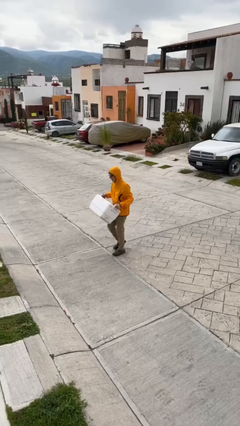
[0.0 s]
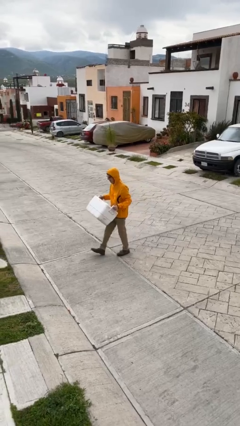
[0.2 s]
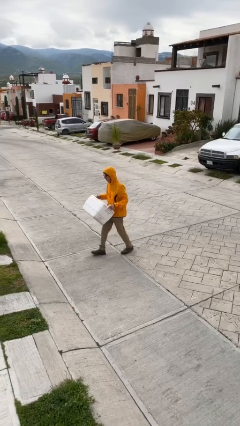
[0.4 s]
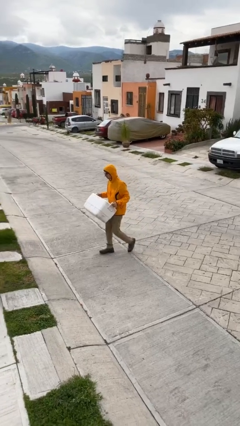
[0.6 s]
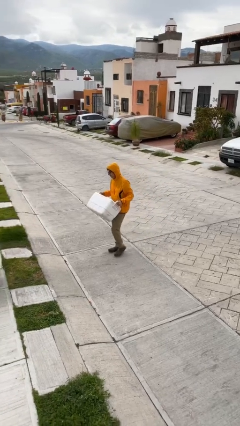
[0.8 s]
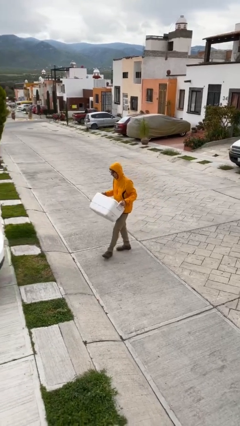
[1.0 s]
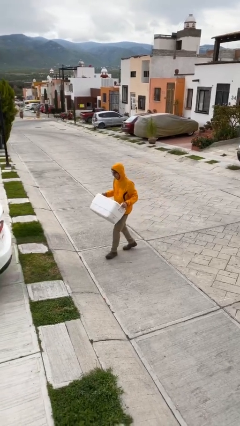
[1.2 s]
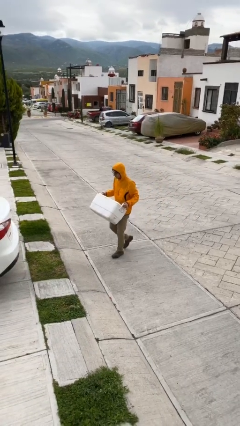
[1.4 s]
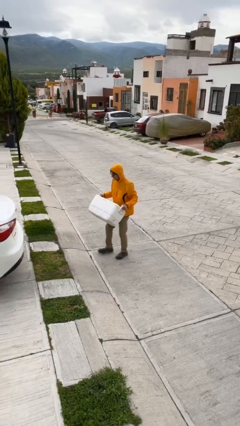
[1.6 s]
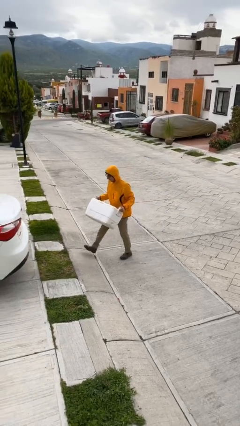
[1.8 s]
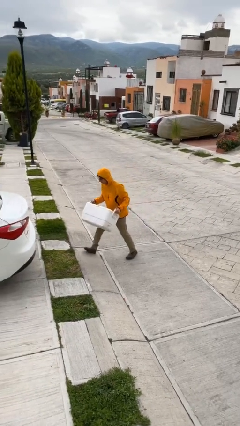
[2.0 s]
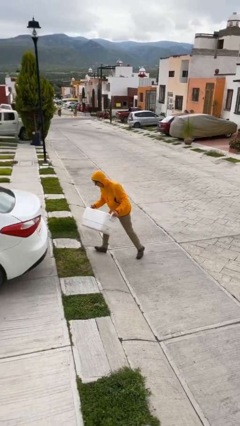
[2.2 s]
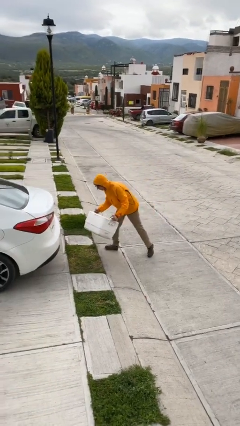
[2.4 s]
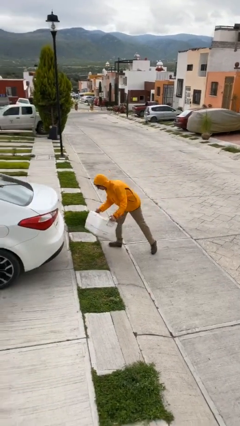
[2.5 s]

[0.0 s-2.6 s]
person carries heavy object

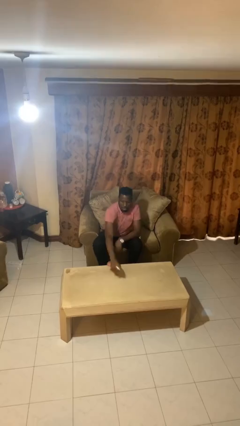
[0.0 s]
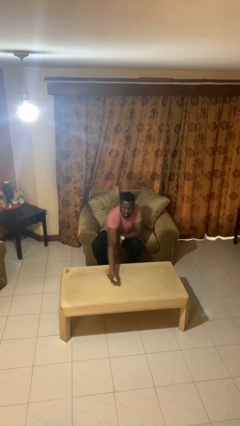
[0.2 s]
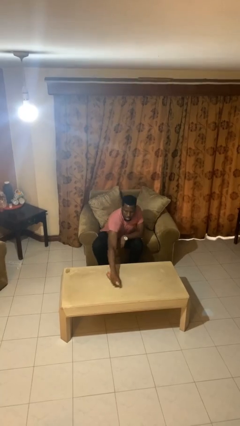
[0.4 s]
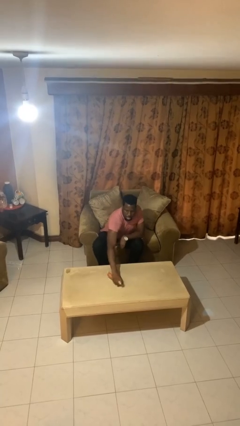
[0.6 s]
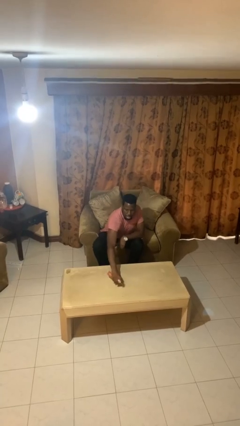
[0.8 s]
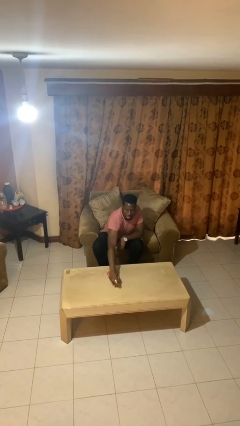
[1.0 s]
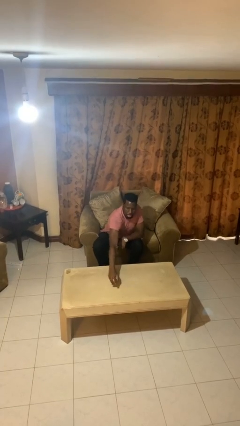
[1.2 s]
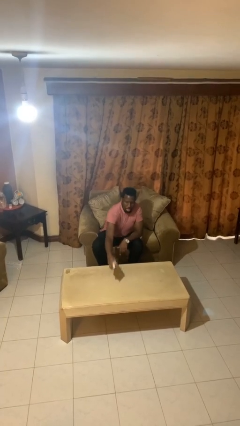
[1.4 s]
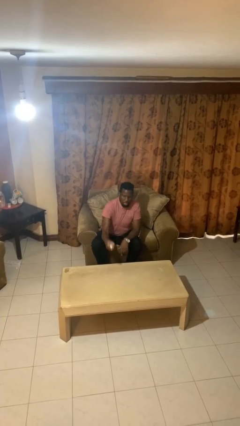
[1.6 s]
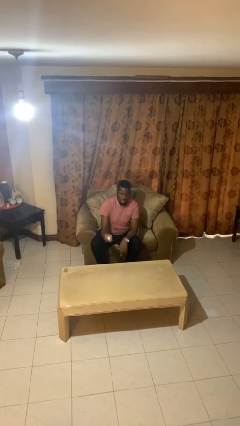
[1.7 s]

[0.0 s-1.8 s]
person sprays from bottle

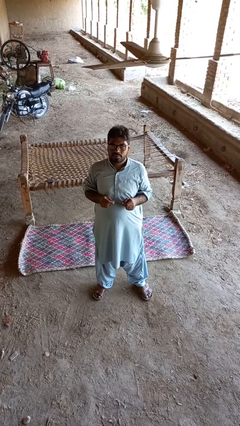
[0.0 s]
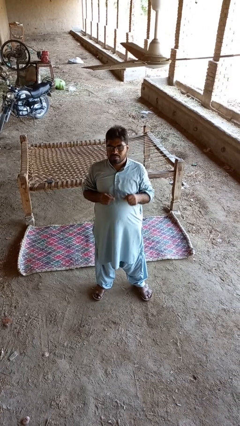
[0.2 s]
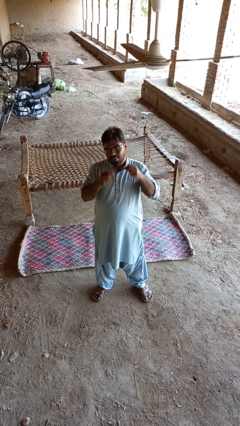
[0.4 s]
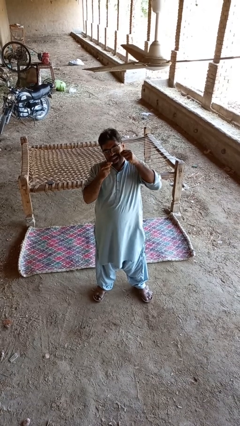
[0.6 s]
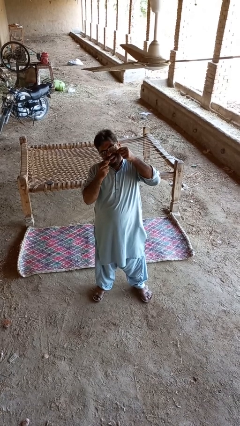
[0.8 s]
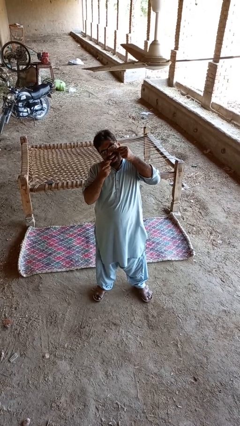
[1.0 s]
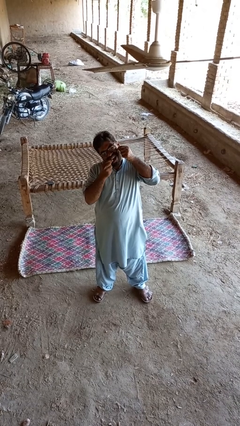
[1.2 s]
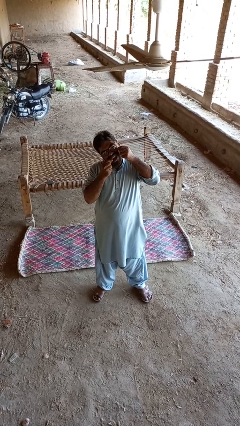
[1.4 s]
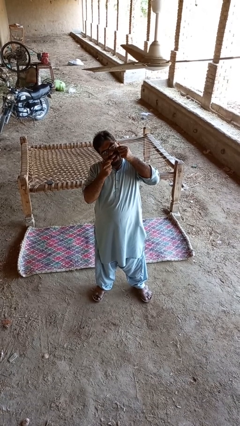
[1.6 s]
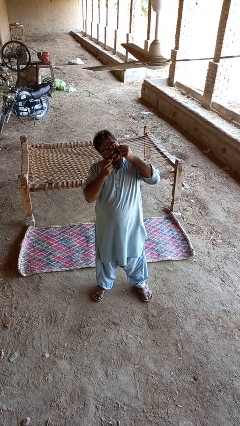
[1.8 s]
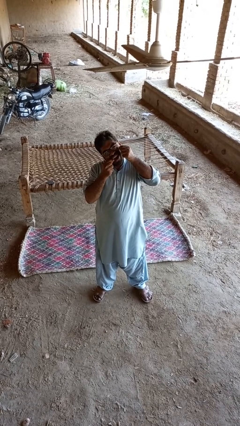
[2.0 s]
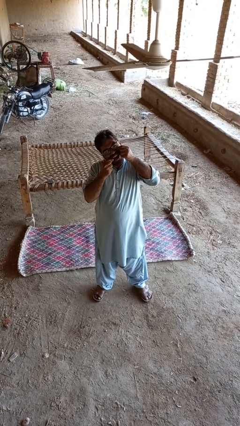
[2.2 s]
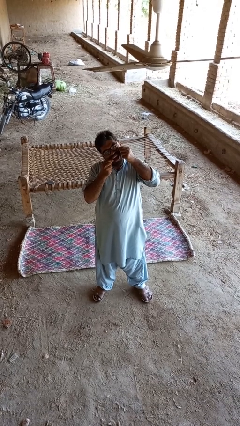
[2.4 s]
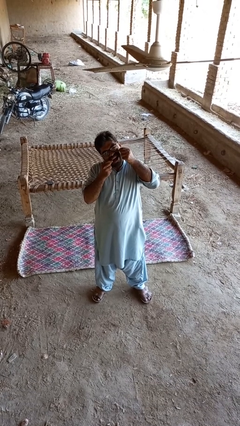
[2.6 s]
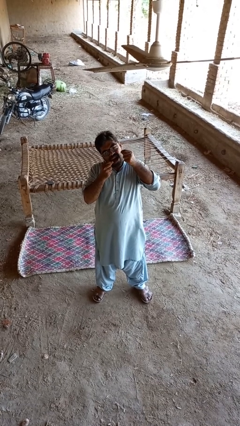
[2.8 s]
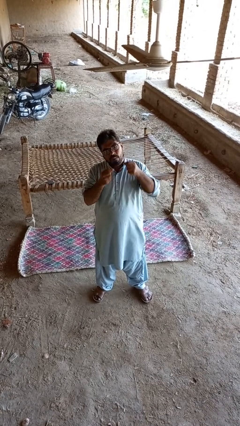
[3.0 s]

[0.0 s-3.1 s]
person flosses

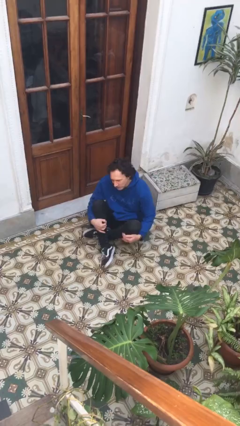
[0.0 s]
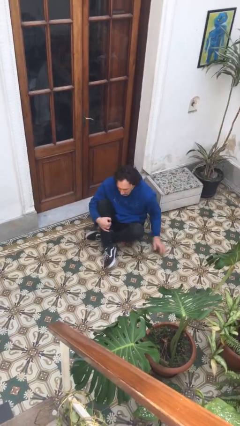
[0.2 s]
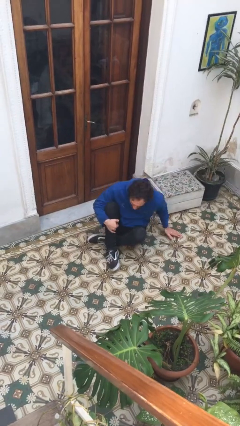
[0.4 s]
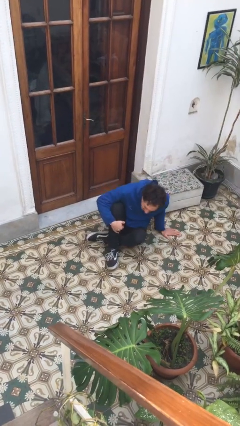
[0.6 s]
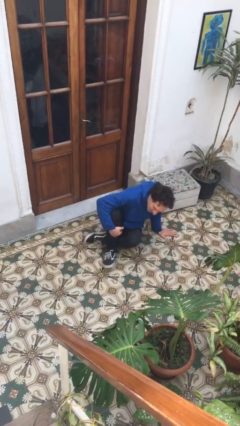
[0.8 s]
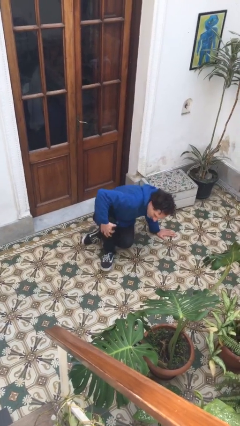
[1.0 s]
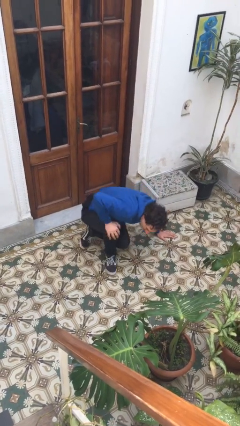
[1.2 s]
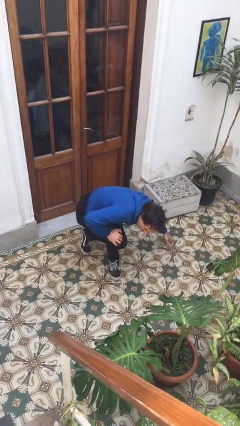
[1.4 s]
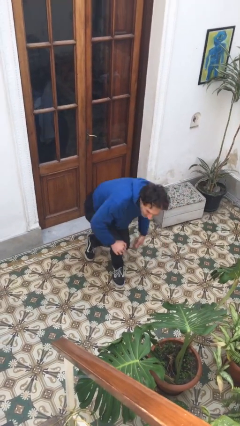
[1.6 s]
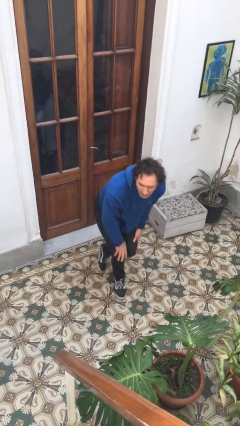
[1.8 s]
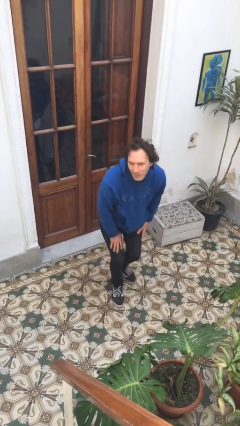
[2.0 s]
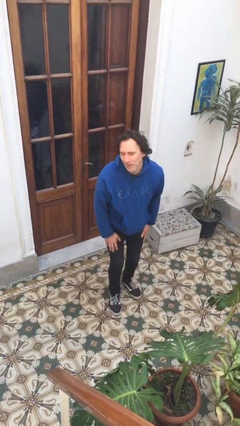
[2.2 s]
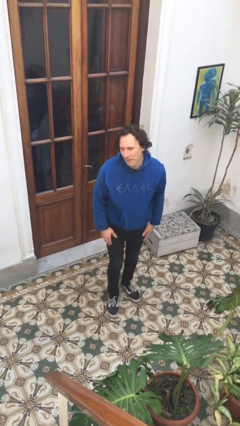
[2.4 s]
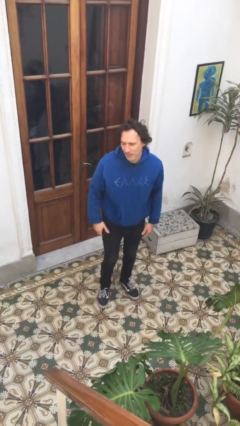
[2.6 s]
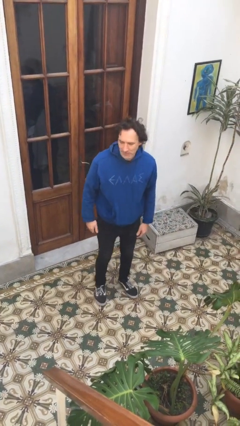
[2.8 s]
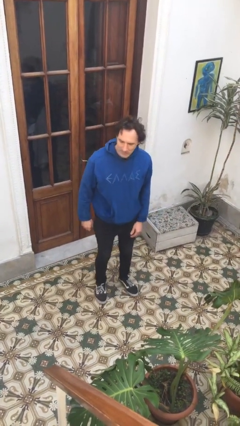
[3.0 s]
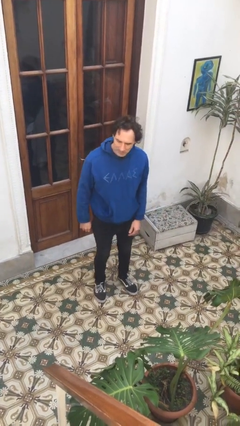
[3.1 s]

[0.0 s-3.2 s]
person stands up from floor

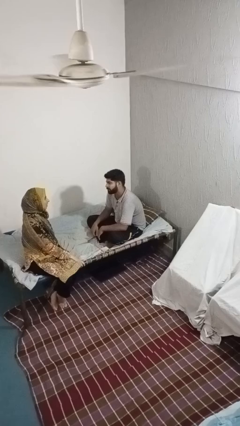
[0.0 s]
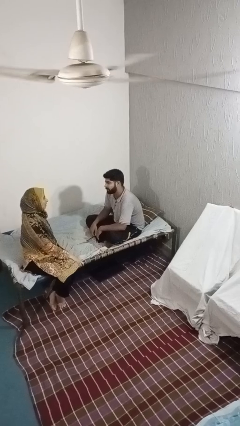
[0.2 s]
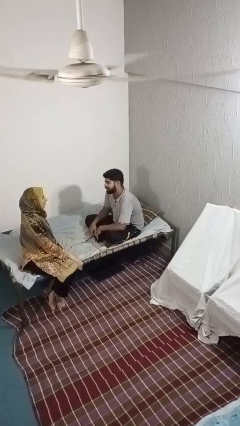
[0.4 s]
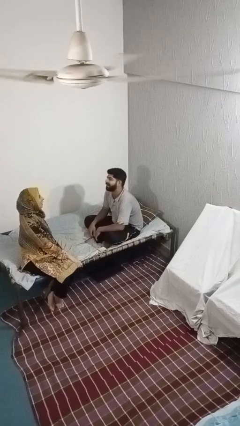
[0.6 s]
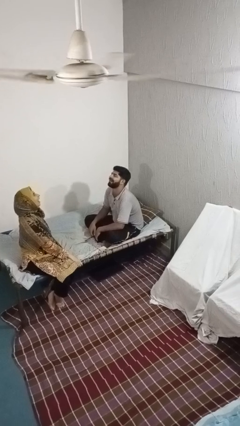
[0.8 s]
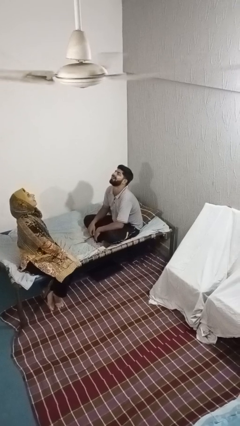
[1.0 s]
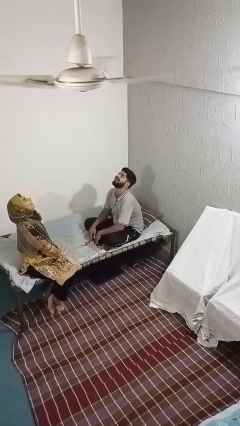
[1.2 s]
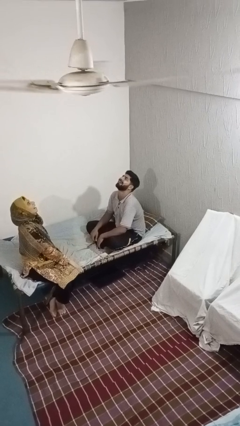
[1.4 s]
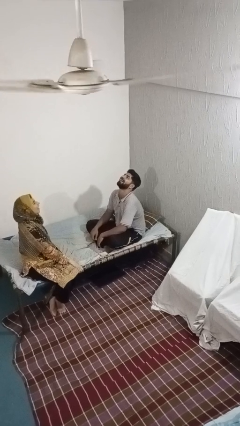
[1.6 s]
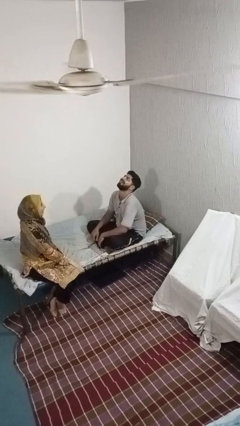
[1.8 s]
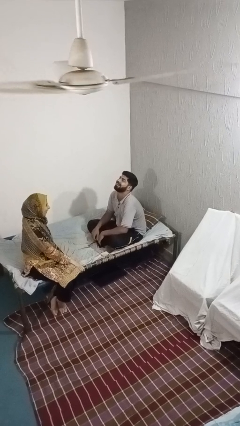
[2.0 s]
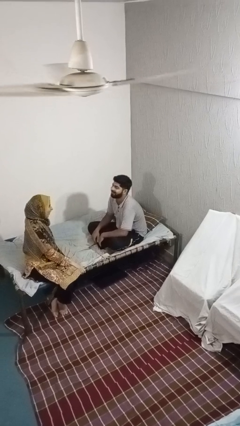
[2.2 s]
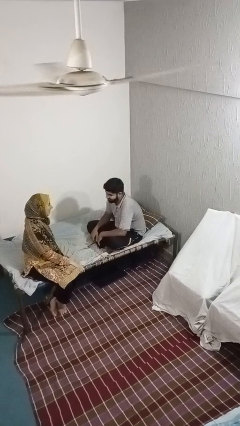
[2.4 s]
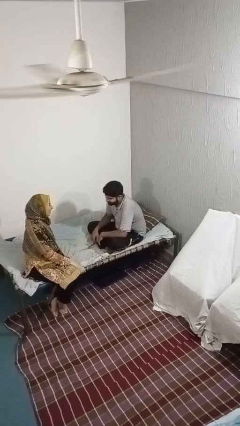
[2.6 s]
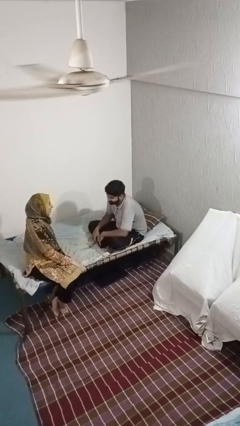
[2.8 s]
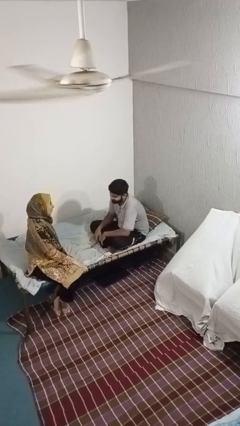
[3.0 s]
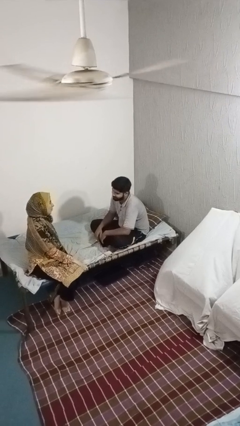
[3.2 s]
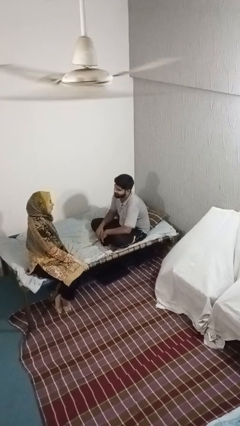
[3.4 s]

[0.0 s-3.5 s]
person laughs with person

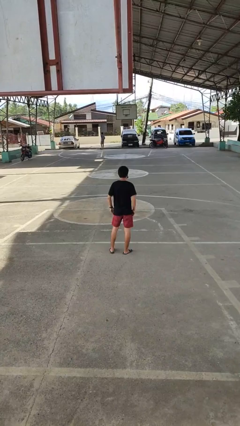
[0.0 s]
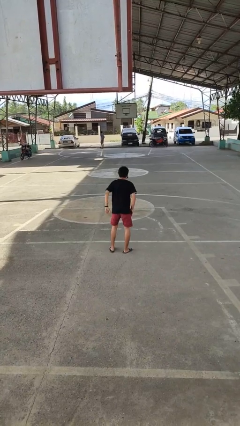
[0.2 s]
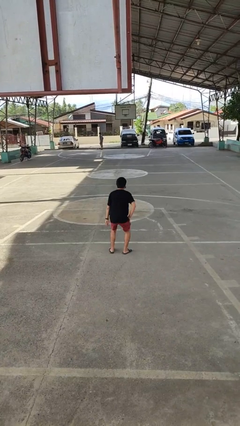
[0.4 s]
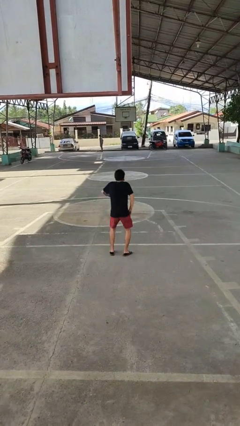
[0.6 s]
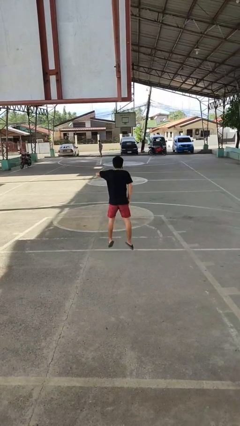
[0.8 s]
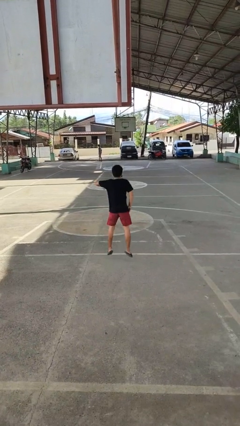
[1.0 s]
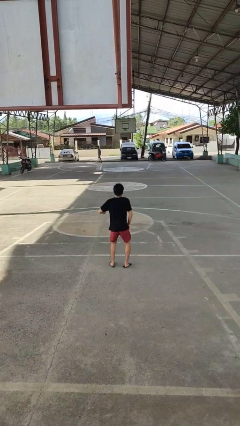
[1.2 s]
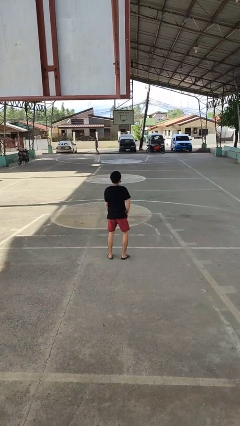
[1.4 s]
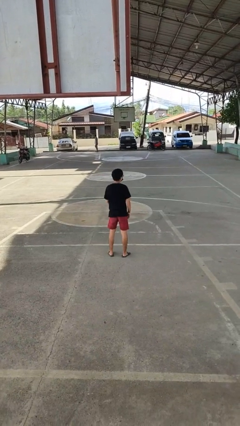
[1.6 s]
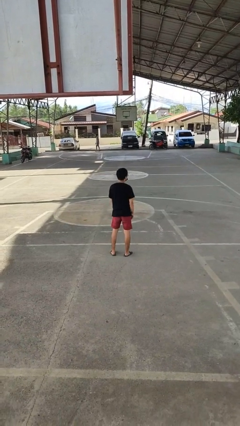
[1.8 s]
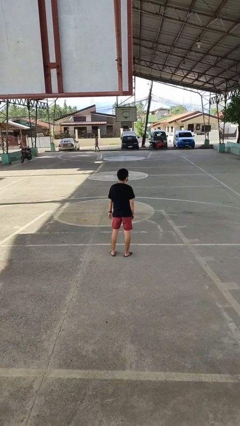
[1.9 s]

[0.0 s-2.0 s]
person jumps

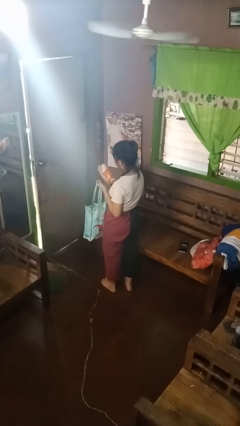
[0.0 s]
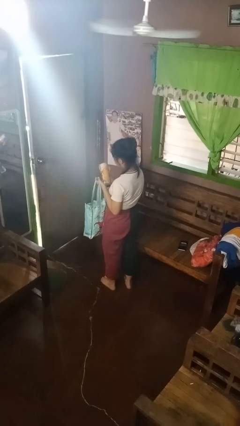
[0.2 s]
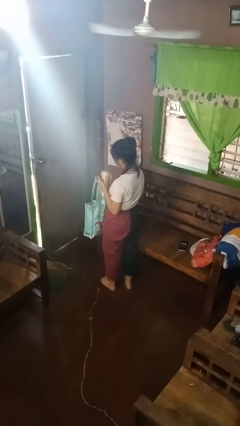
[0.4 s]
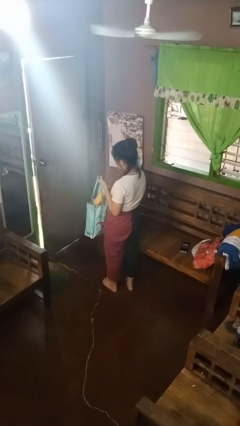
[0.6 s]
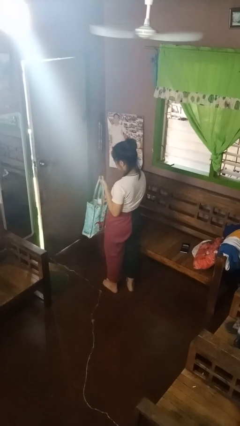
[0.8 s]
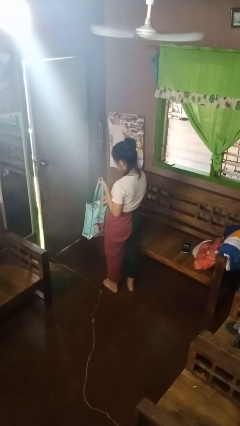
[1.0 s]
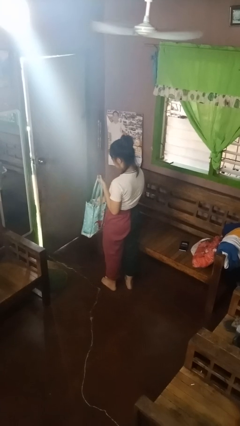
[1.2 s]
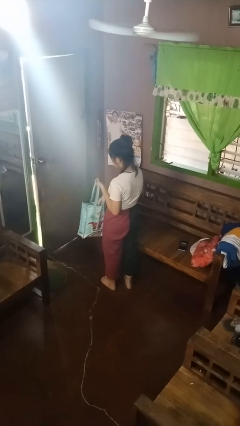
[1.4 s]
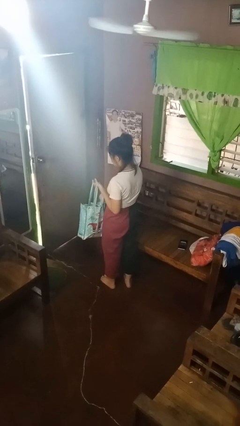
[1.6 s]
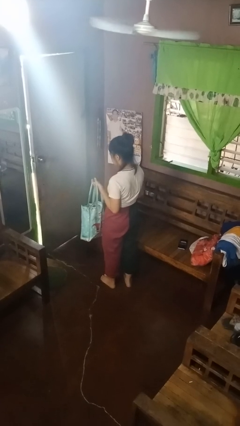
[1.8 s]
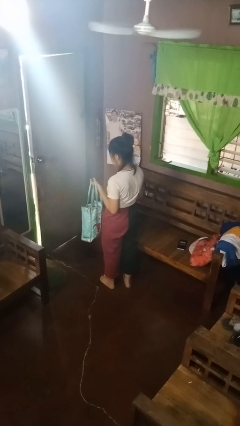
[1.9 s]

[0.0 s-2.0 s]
person puts object into bag
